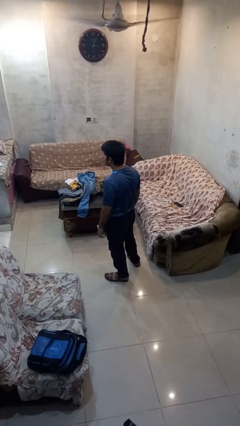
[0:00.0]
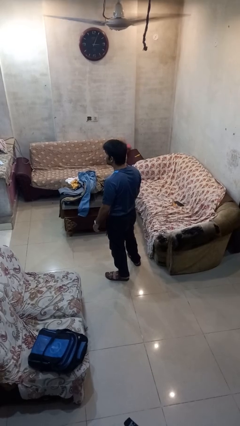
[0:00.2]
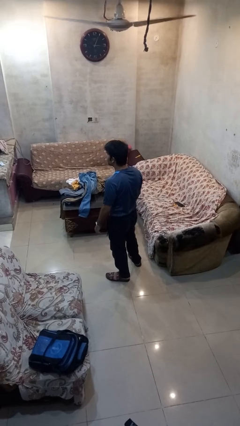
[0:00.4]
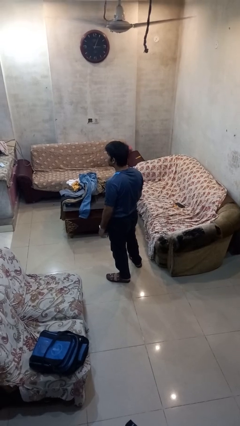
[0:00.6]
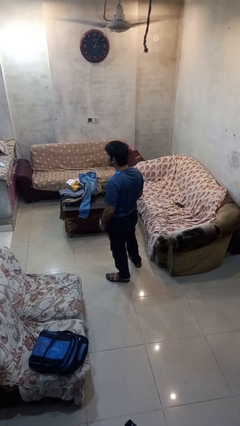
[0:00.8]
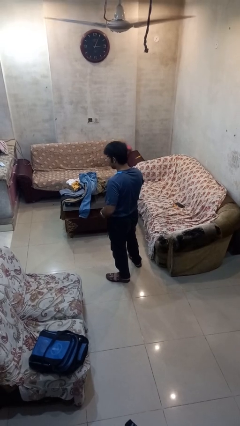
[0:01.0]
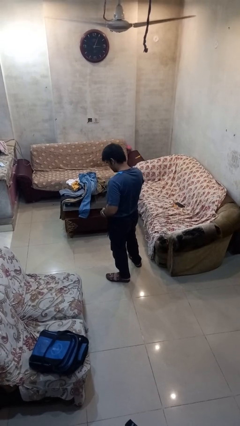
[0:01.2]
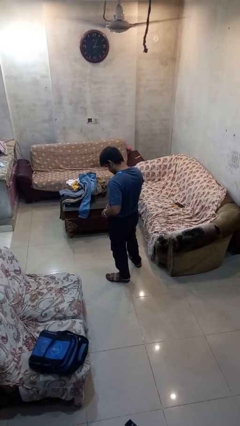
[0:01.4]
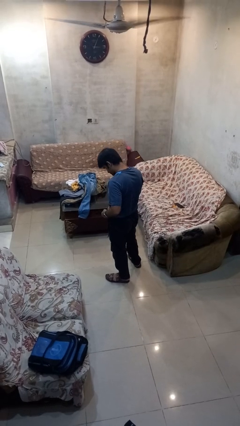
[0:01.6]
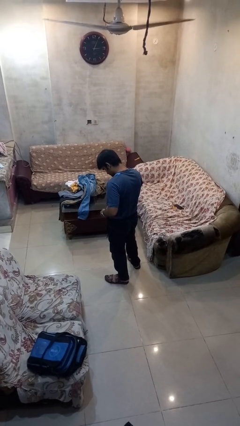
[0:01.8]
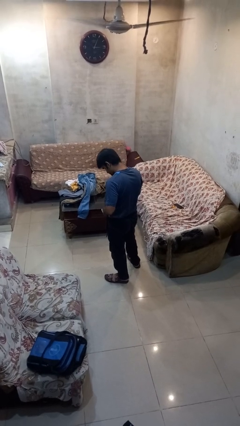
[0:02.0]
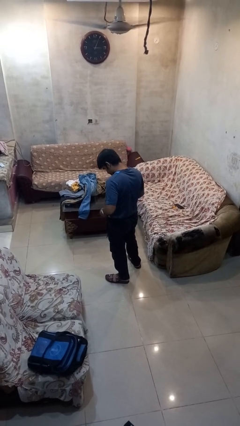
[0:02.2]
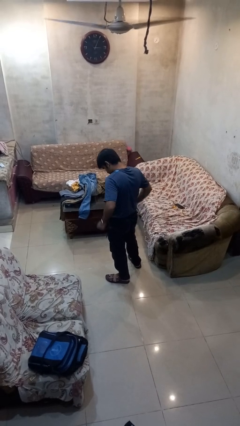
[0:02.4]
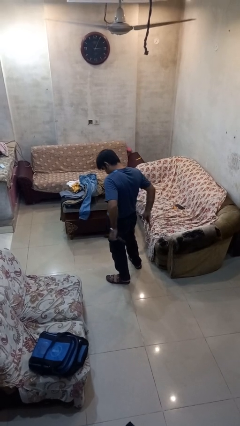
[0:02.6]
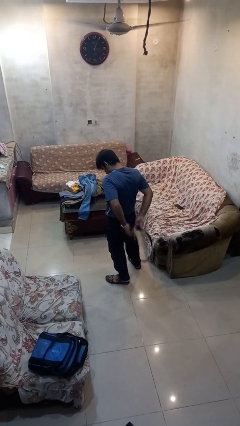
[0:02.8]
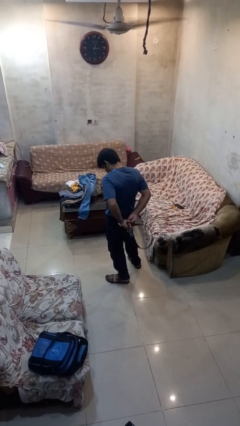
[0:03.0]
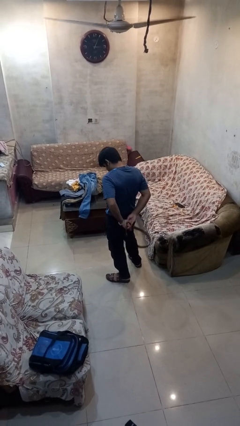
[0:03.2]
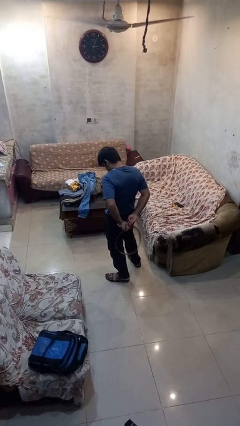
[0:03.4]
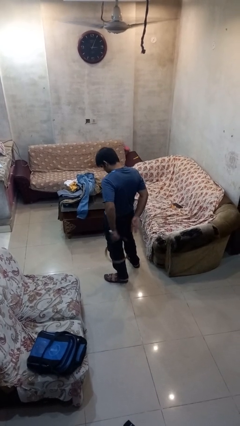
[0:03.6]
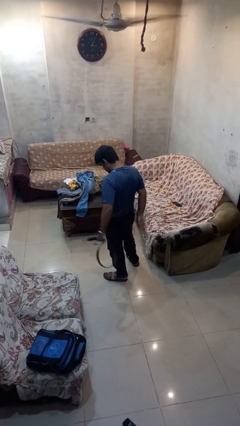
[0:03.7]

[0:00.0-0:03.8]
person takes off belt

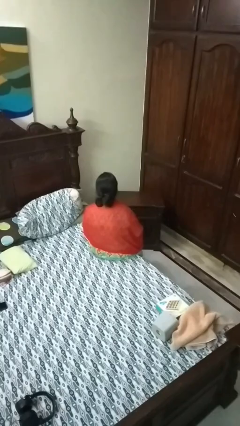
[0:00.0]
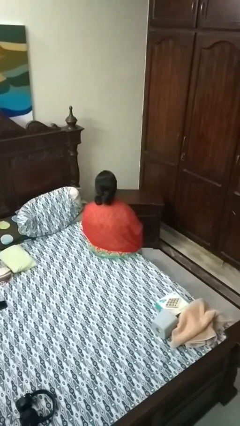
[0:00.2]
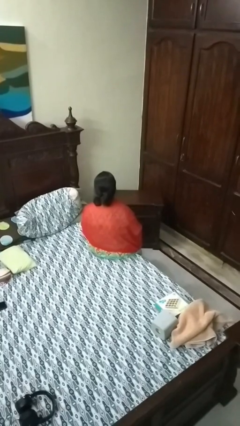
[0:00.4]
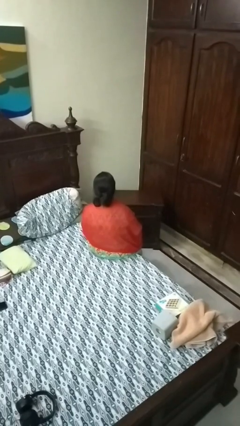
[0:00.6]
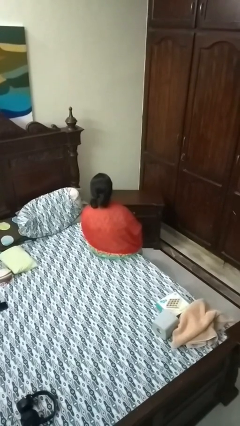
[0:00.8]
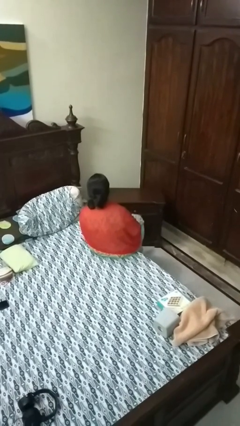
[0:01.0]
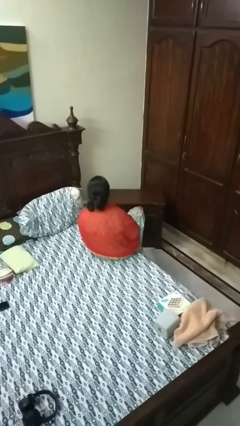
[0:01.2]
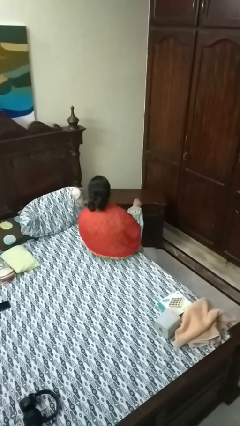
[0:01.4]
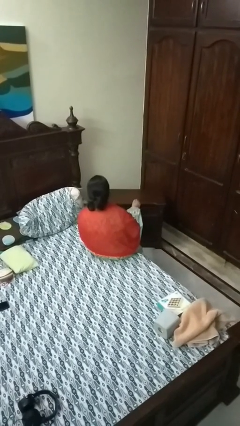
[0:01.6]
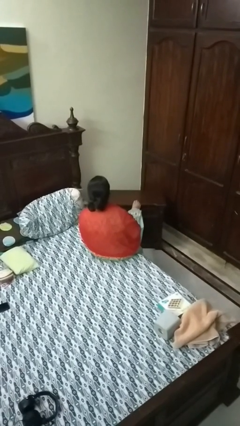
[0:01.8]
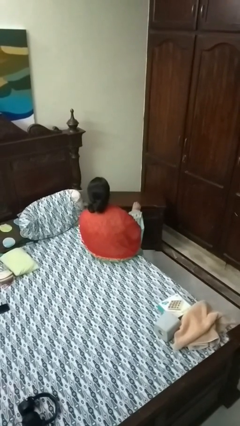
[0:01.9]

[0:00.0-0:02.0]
person puts feet up

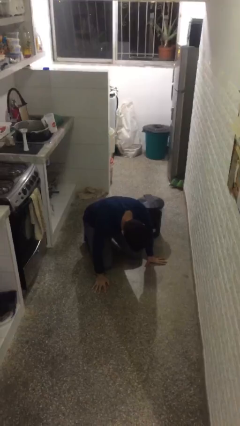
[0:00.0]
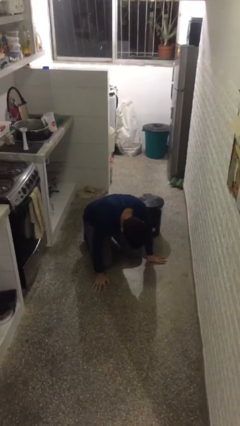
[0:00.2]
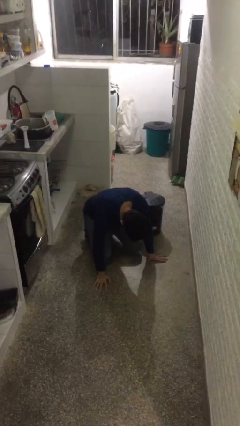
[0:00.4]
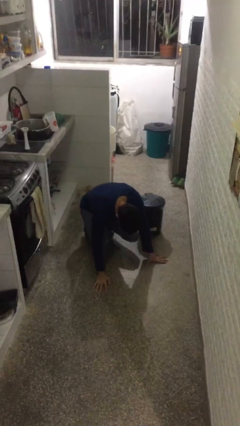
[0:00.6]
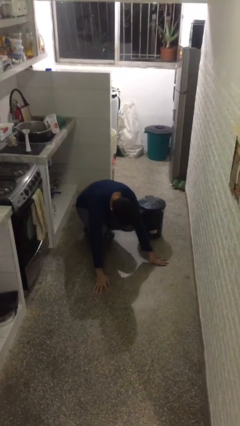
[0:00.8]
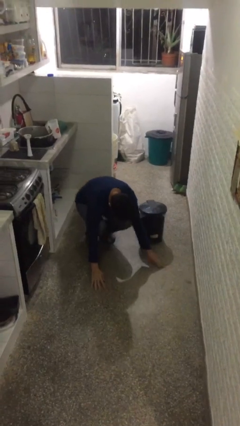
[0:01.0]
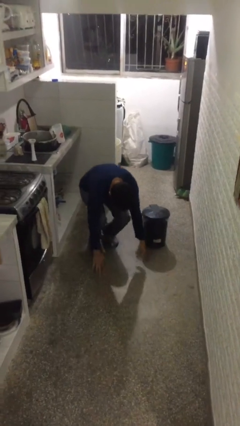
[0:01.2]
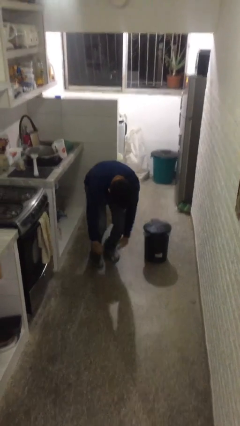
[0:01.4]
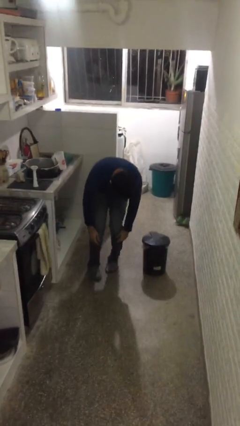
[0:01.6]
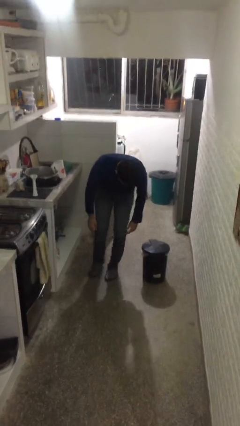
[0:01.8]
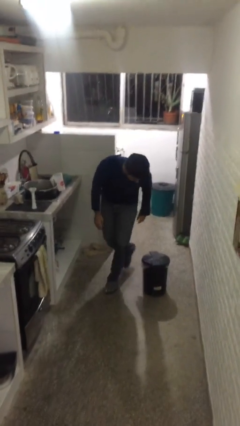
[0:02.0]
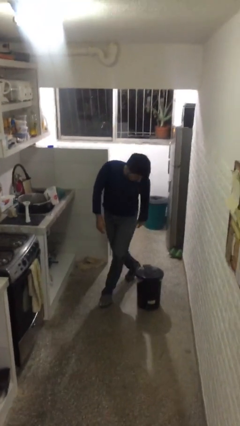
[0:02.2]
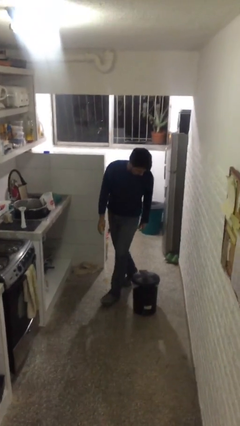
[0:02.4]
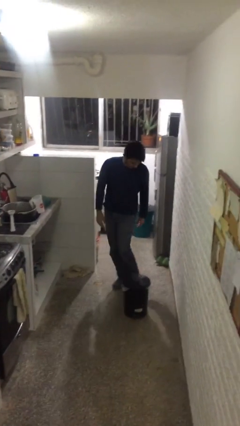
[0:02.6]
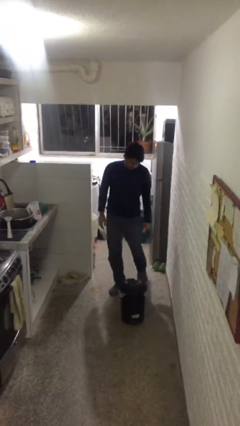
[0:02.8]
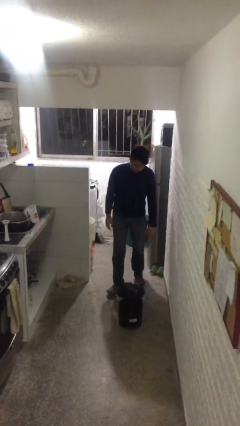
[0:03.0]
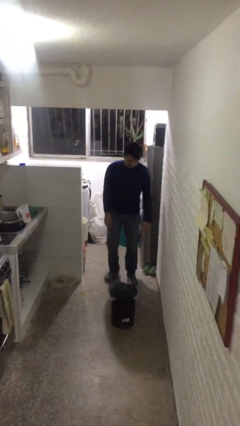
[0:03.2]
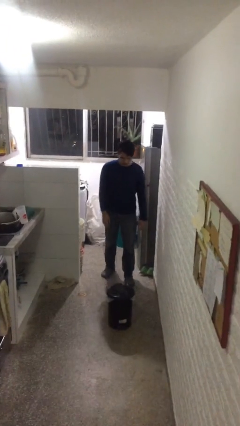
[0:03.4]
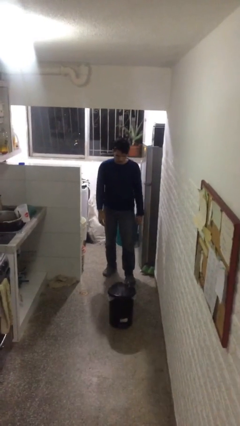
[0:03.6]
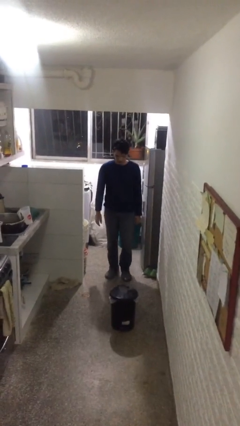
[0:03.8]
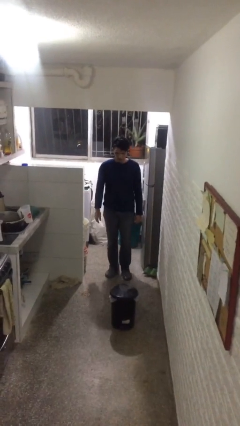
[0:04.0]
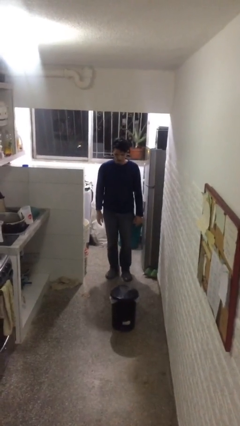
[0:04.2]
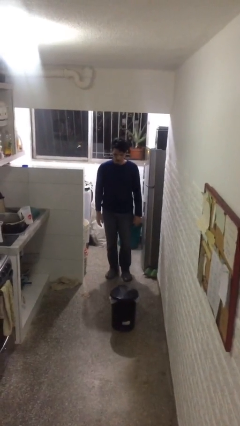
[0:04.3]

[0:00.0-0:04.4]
person stands up from floor

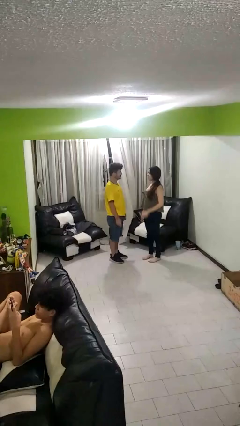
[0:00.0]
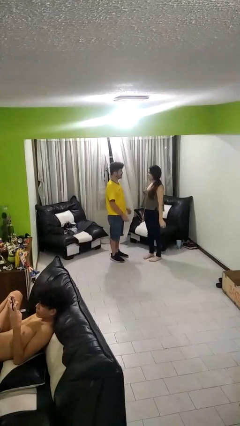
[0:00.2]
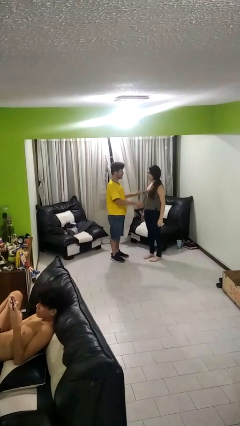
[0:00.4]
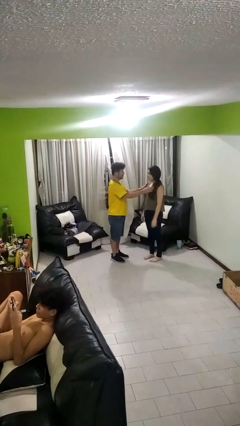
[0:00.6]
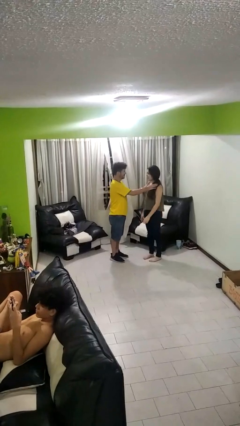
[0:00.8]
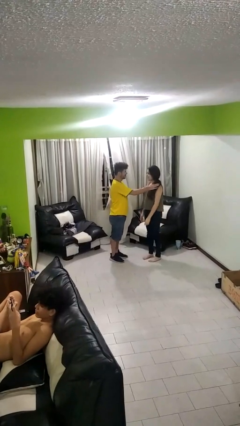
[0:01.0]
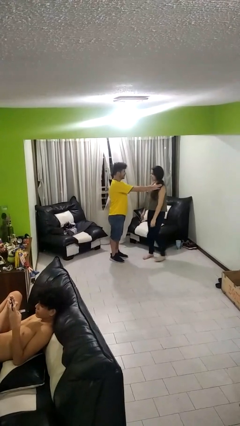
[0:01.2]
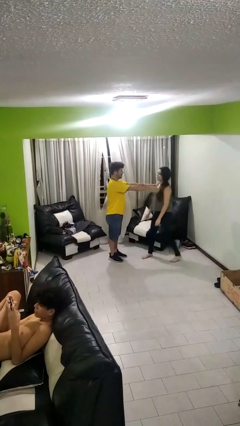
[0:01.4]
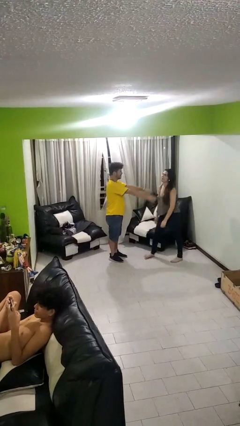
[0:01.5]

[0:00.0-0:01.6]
person shoves person

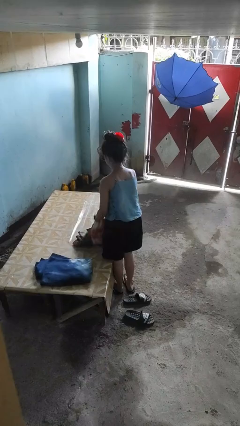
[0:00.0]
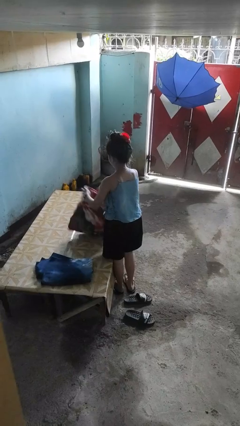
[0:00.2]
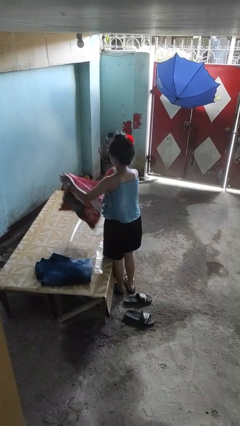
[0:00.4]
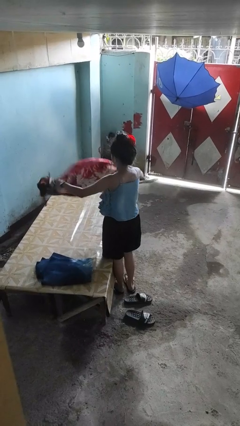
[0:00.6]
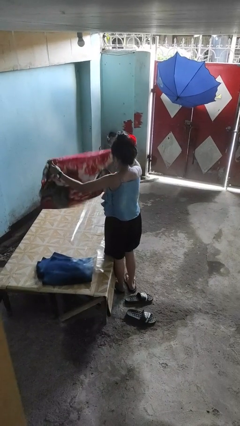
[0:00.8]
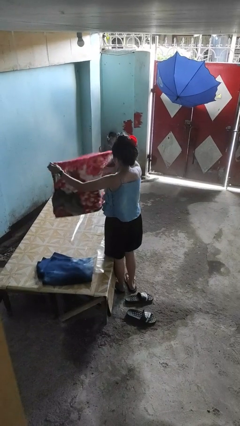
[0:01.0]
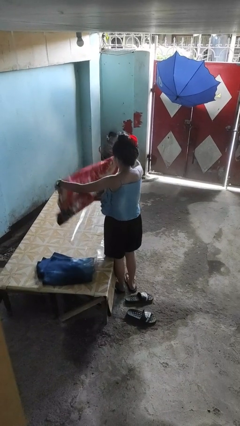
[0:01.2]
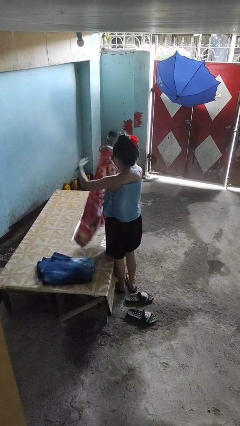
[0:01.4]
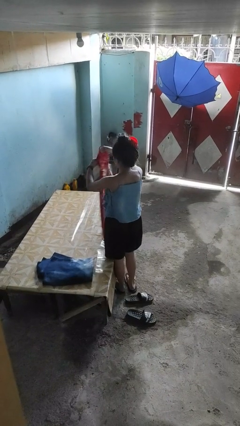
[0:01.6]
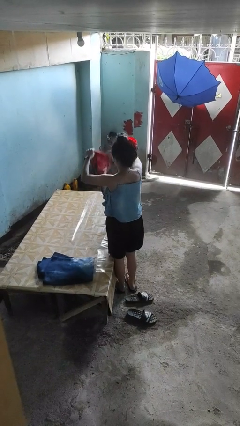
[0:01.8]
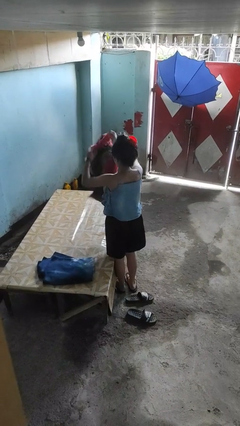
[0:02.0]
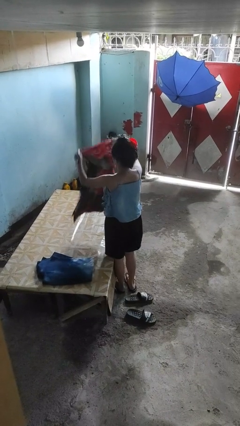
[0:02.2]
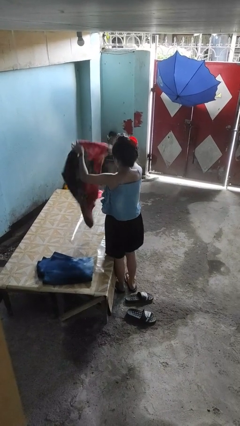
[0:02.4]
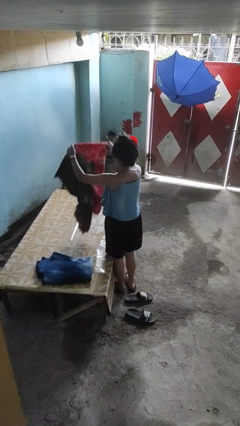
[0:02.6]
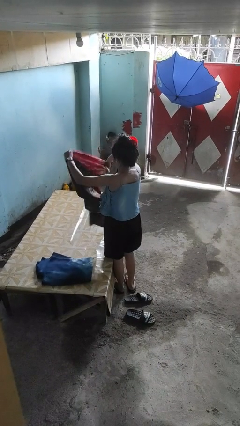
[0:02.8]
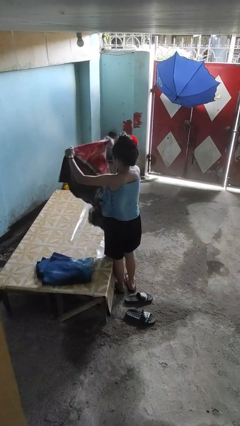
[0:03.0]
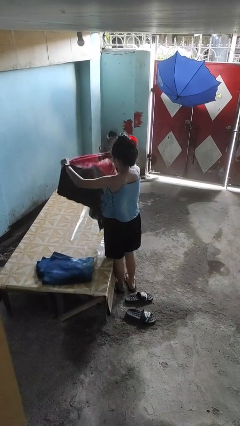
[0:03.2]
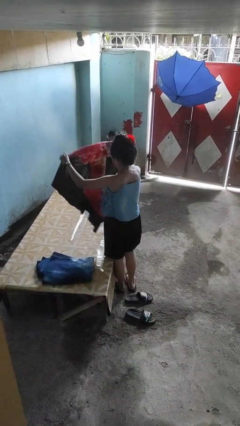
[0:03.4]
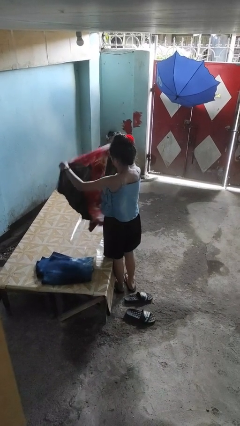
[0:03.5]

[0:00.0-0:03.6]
person unfolds blanket

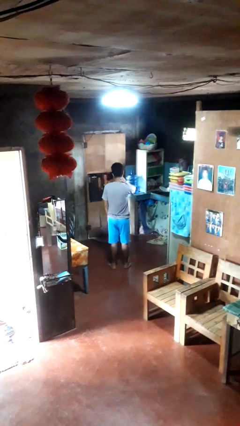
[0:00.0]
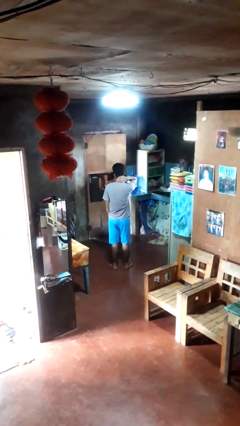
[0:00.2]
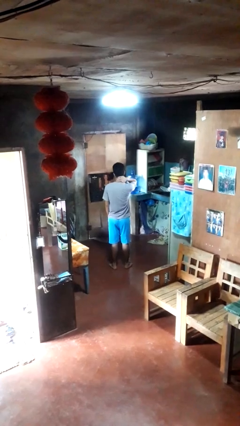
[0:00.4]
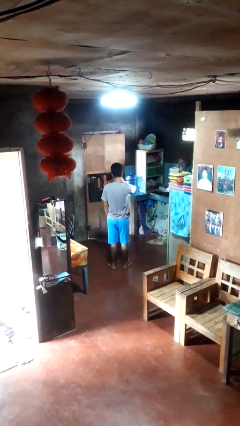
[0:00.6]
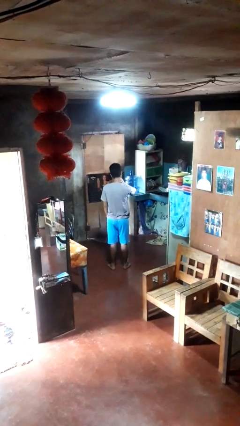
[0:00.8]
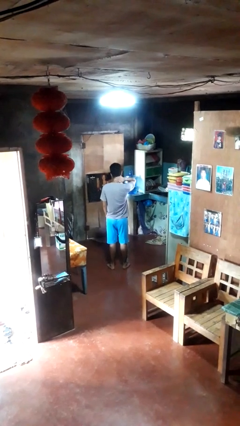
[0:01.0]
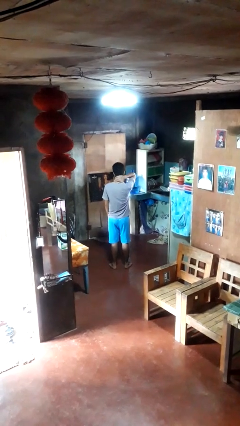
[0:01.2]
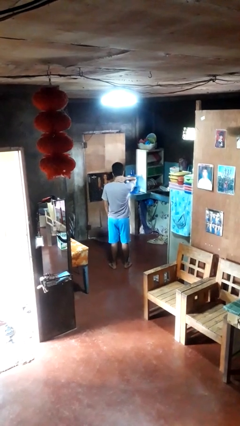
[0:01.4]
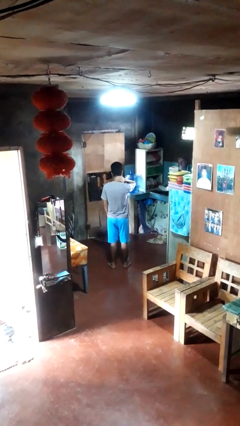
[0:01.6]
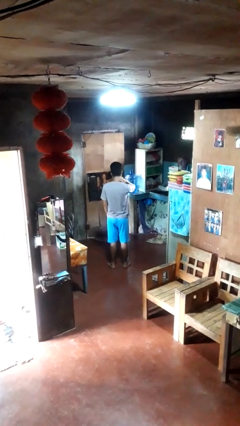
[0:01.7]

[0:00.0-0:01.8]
person rubs neck

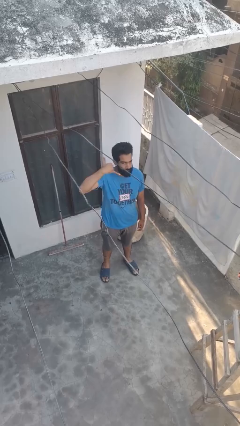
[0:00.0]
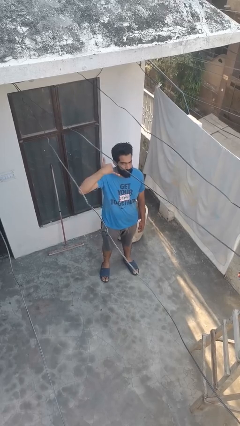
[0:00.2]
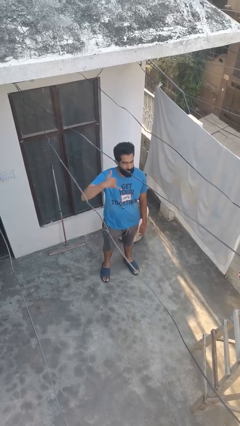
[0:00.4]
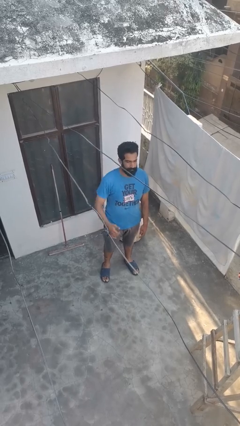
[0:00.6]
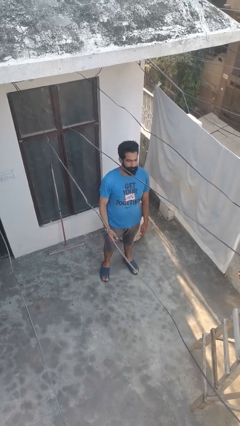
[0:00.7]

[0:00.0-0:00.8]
person gestures call me
